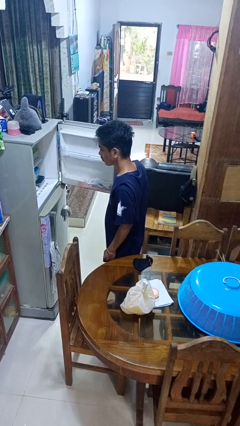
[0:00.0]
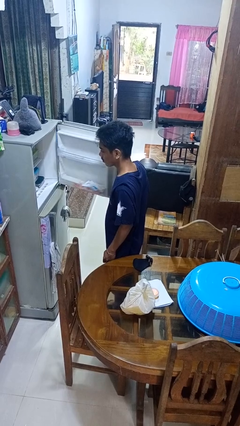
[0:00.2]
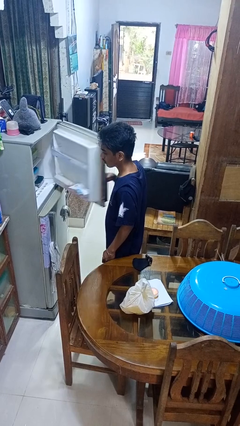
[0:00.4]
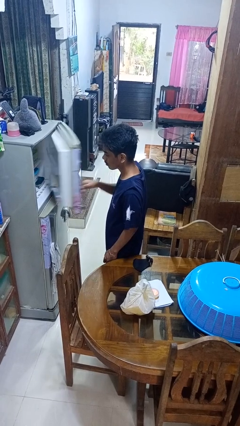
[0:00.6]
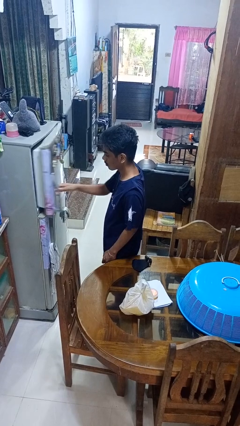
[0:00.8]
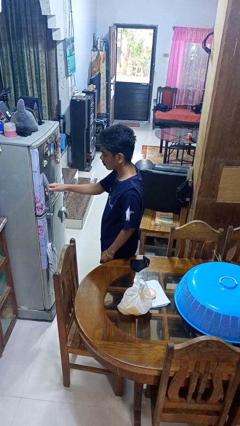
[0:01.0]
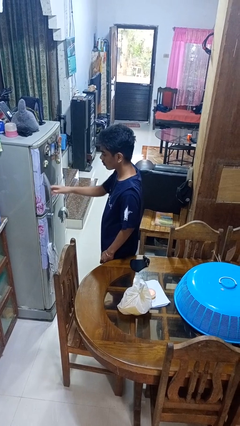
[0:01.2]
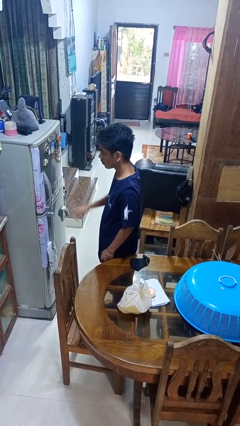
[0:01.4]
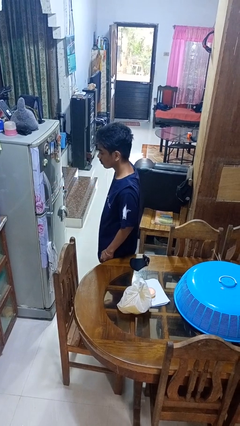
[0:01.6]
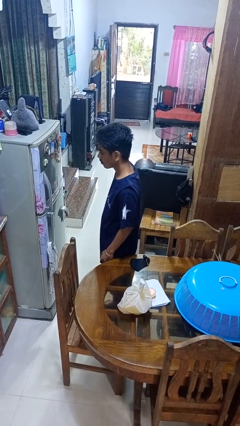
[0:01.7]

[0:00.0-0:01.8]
person closes refrigerator

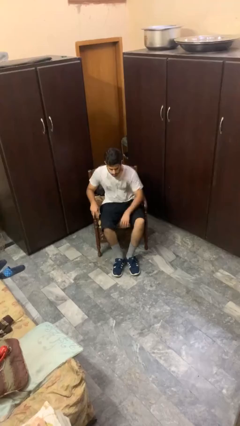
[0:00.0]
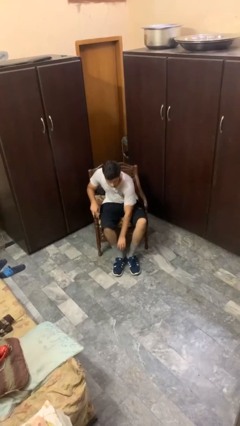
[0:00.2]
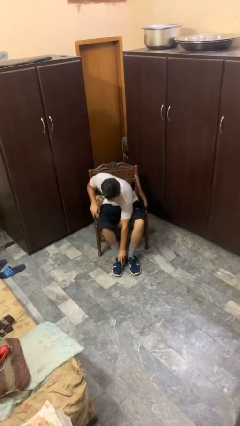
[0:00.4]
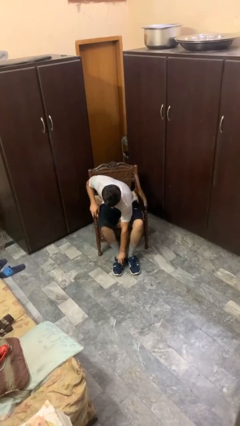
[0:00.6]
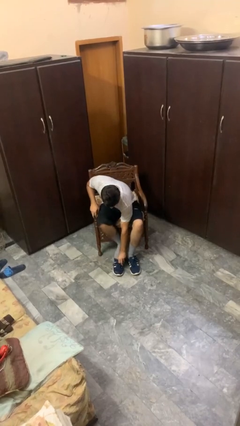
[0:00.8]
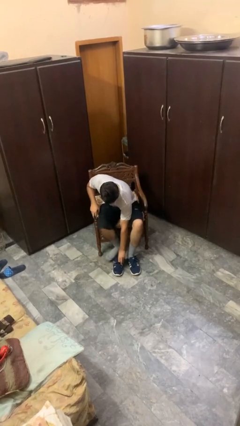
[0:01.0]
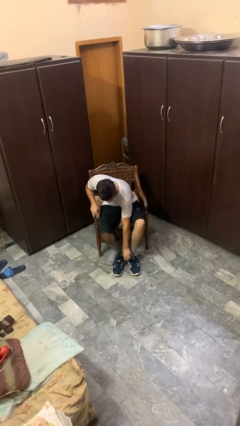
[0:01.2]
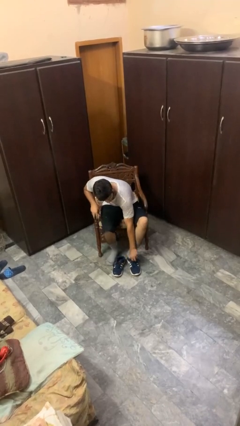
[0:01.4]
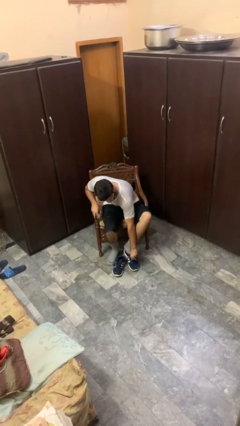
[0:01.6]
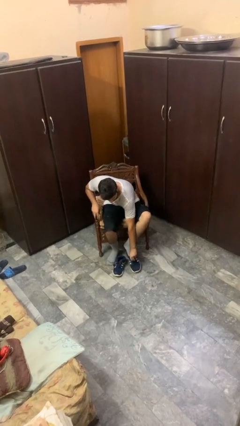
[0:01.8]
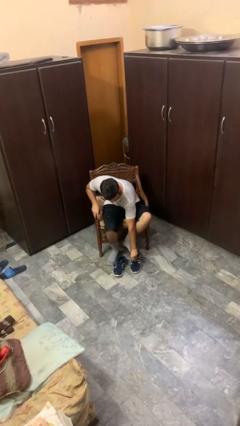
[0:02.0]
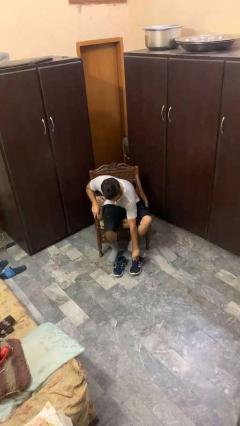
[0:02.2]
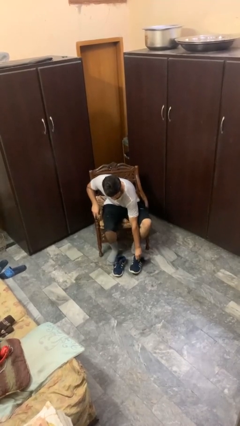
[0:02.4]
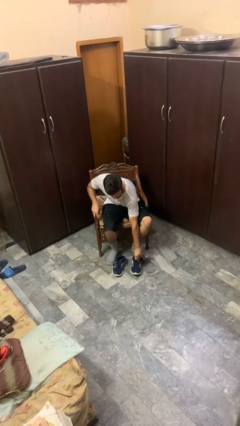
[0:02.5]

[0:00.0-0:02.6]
person takes off shoes

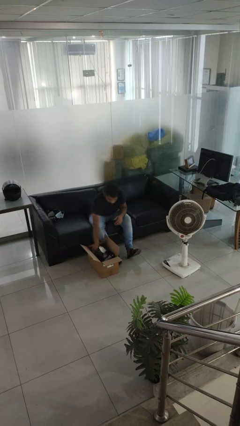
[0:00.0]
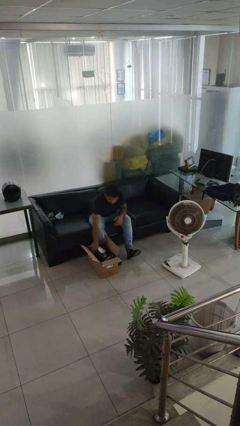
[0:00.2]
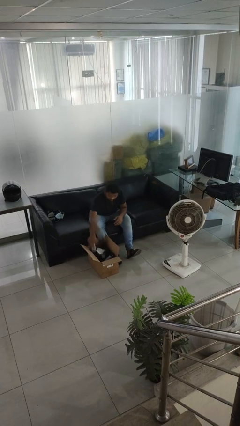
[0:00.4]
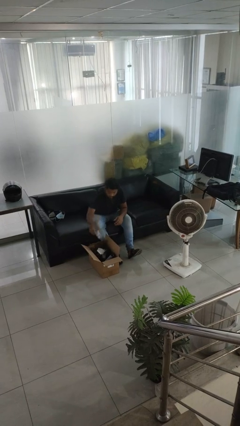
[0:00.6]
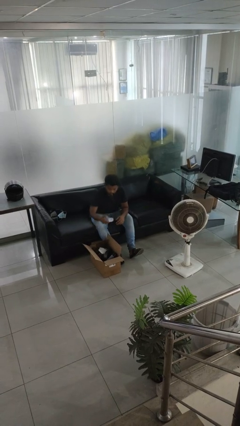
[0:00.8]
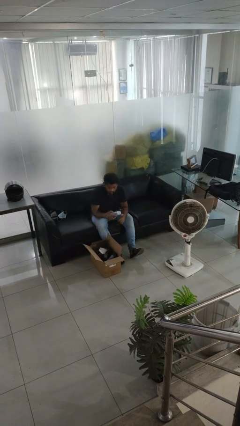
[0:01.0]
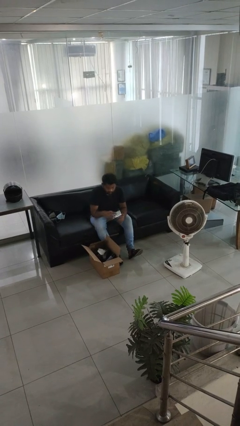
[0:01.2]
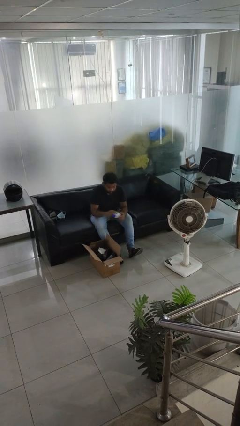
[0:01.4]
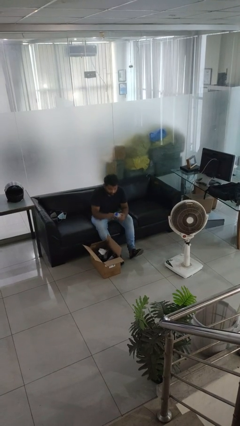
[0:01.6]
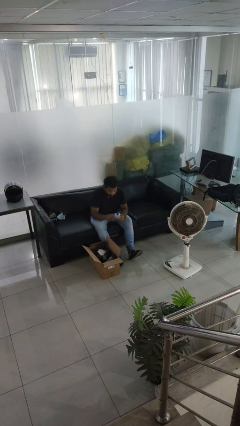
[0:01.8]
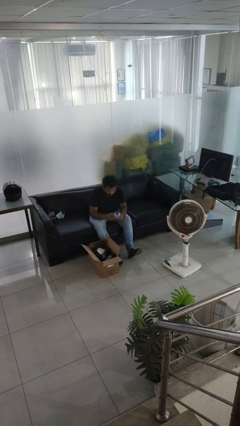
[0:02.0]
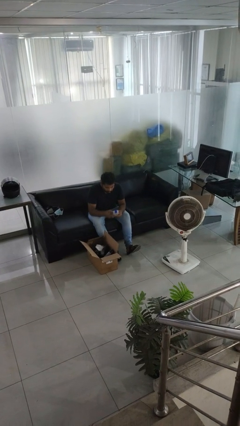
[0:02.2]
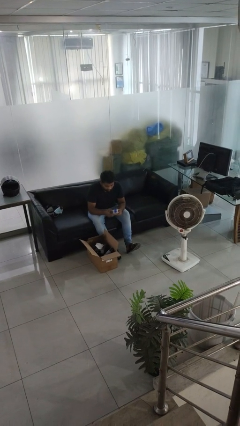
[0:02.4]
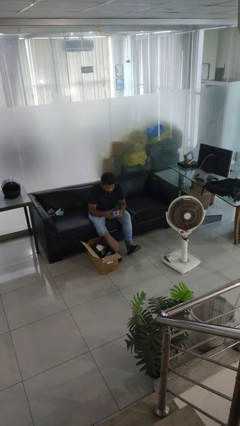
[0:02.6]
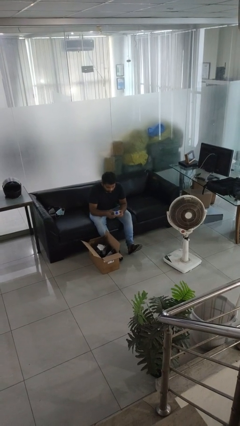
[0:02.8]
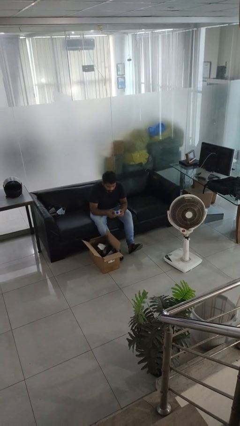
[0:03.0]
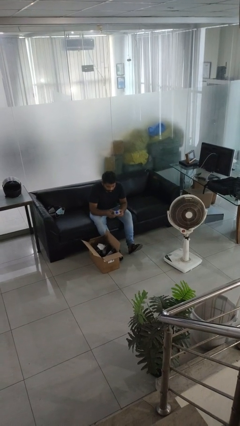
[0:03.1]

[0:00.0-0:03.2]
person takes object from box

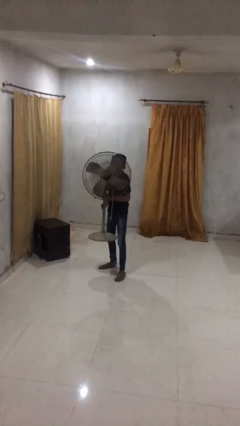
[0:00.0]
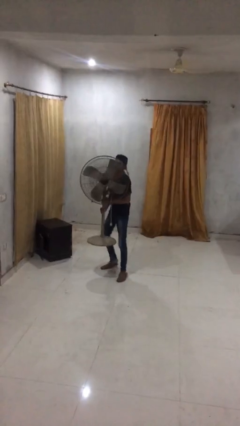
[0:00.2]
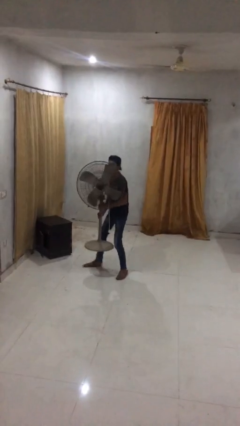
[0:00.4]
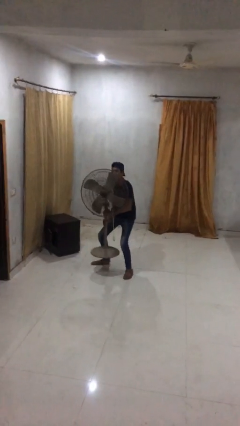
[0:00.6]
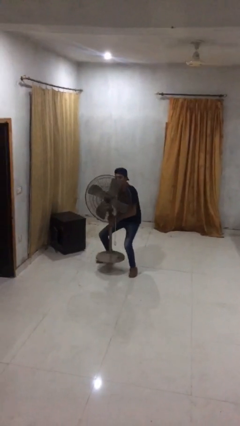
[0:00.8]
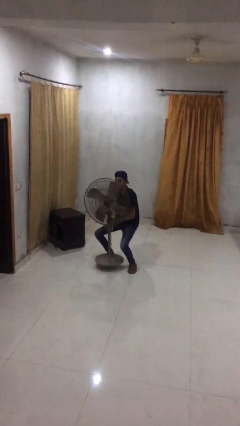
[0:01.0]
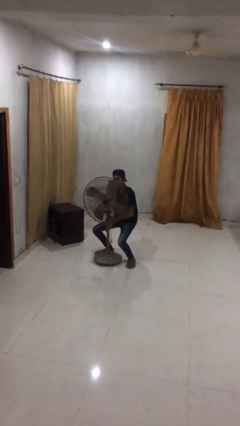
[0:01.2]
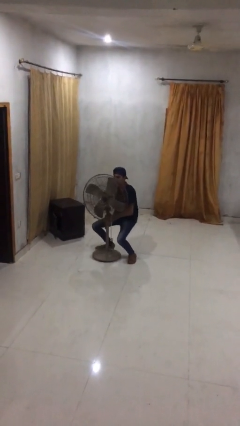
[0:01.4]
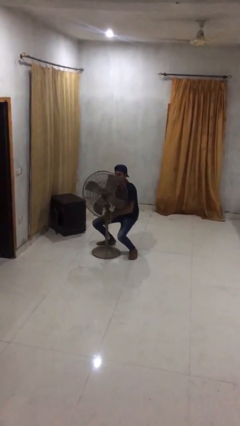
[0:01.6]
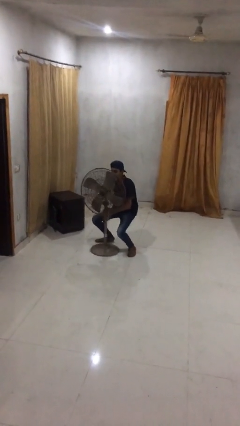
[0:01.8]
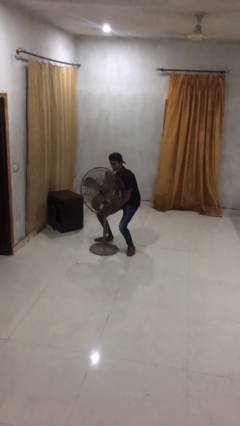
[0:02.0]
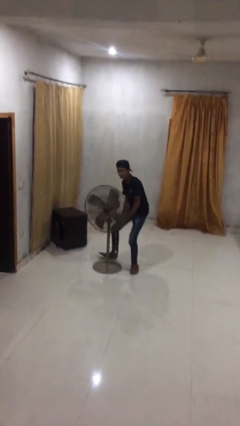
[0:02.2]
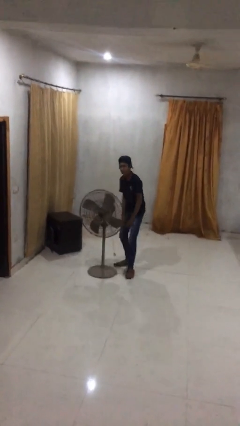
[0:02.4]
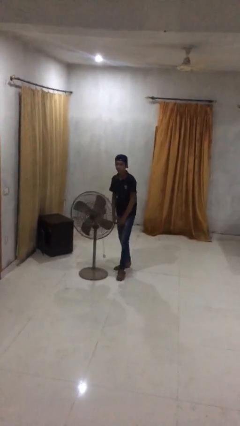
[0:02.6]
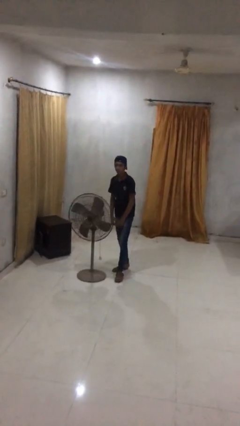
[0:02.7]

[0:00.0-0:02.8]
person puts down object on floor

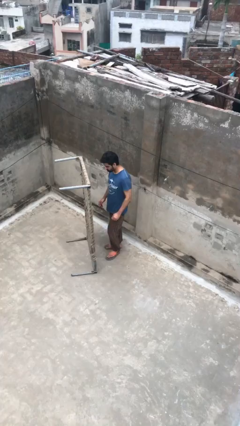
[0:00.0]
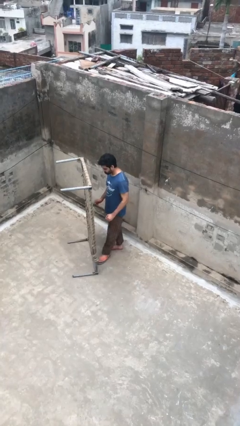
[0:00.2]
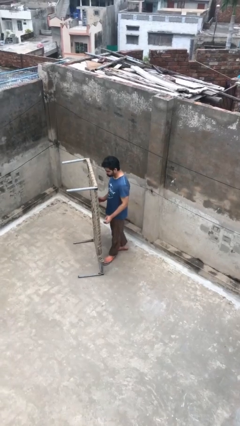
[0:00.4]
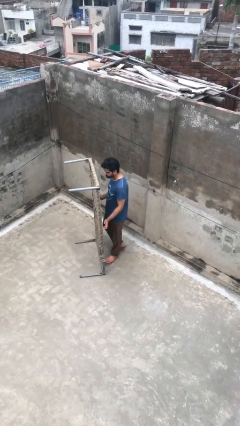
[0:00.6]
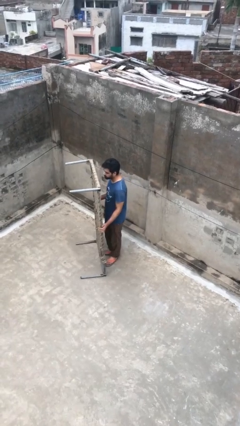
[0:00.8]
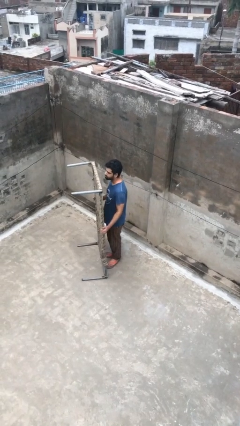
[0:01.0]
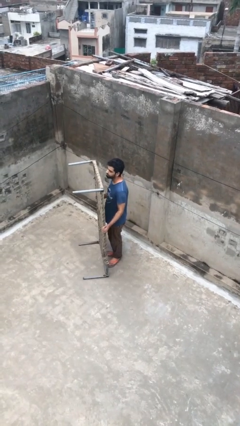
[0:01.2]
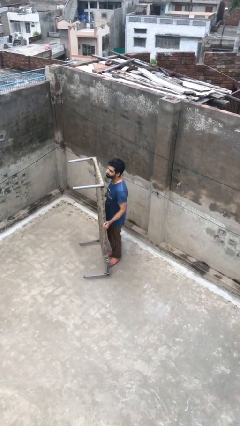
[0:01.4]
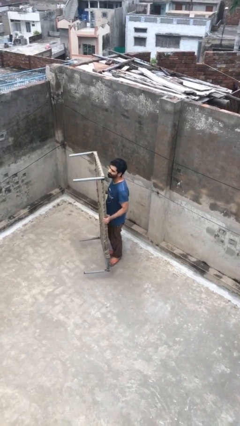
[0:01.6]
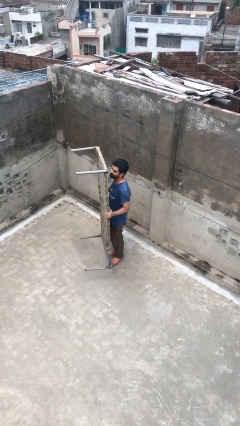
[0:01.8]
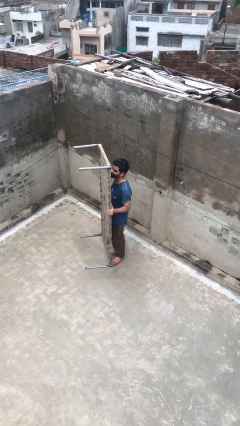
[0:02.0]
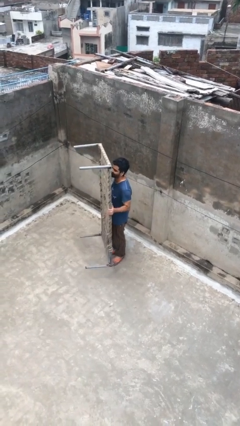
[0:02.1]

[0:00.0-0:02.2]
person picks up object from floor

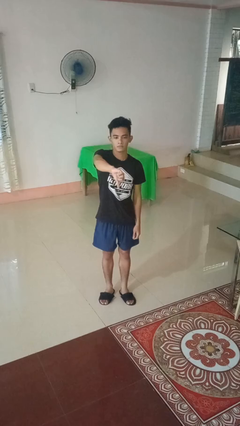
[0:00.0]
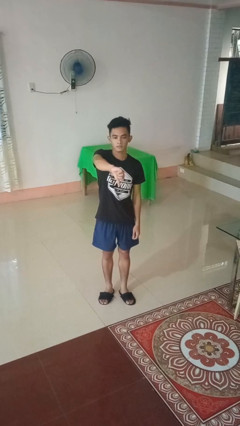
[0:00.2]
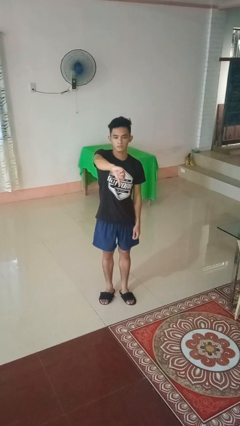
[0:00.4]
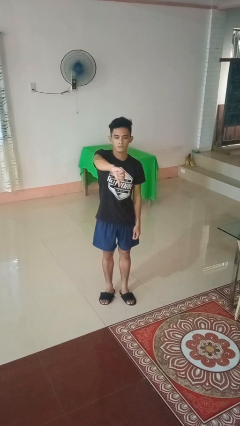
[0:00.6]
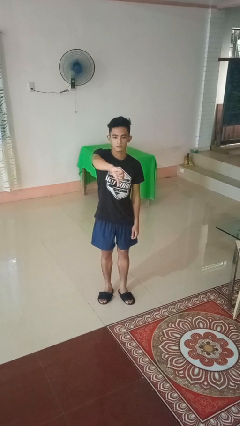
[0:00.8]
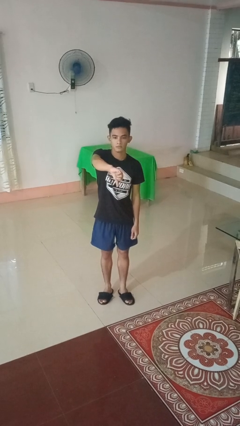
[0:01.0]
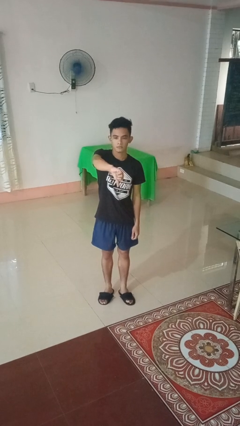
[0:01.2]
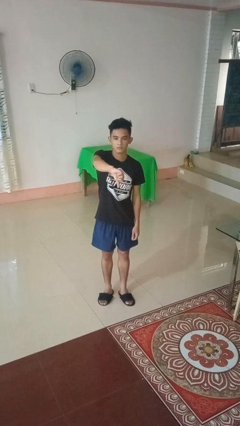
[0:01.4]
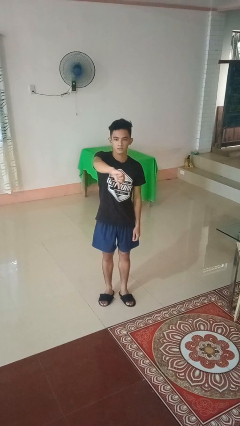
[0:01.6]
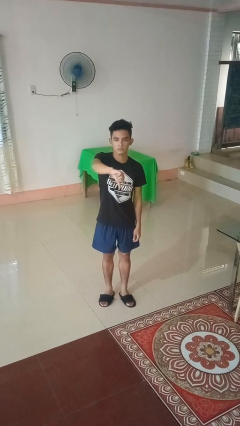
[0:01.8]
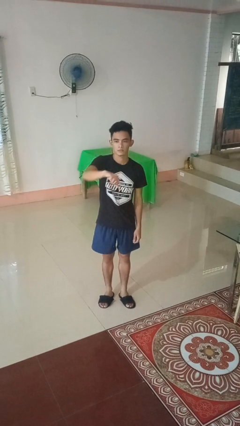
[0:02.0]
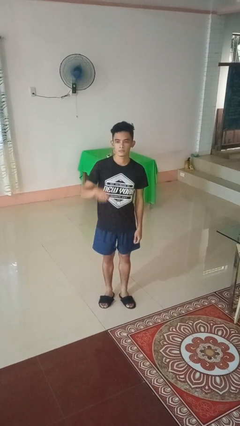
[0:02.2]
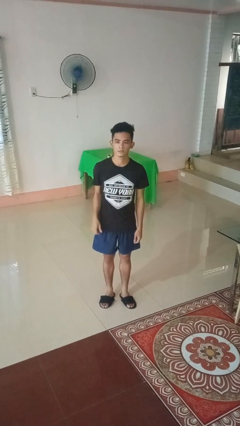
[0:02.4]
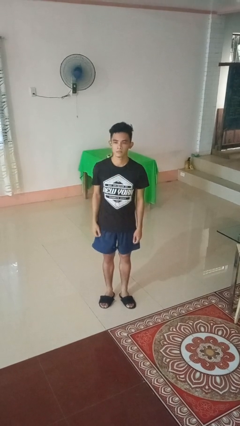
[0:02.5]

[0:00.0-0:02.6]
person gestures thumbs down

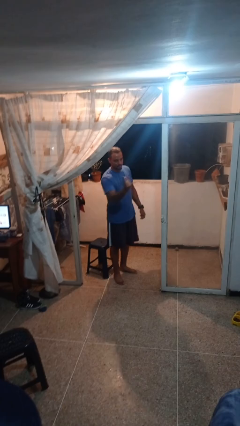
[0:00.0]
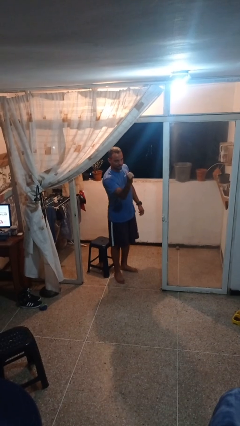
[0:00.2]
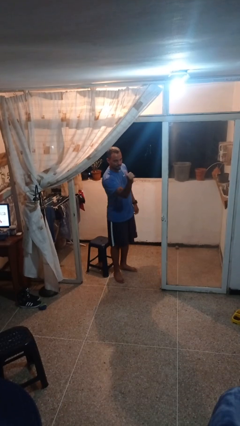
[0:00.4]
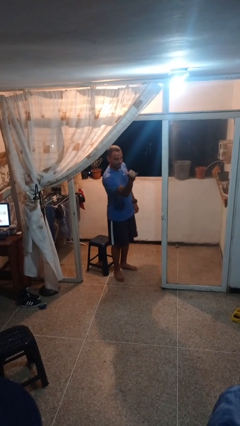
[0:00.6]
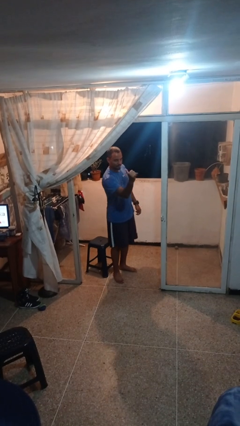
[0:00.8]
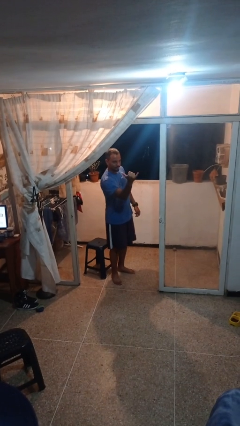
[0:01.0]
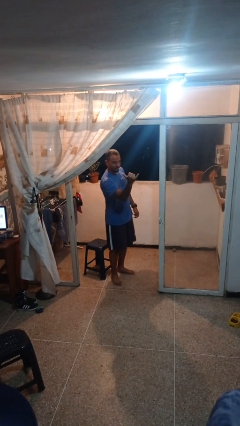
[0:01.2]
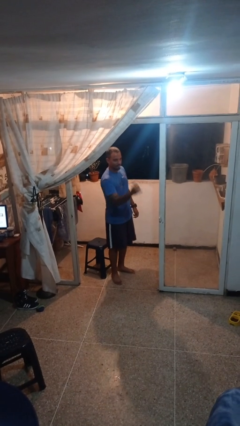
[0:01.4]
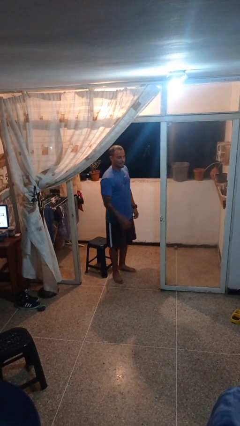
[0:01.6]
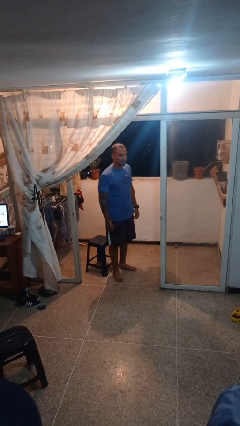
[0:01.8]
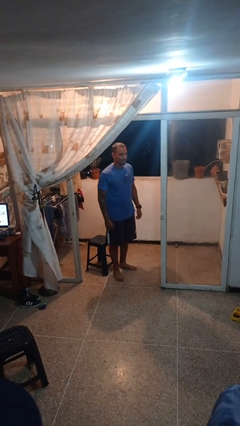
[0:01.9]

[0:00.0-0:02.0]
person gestures hang loose
